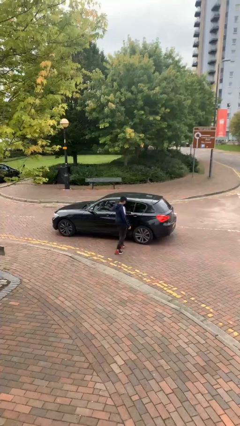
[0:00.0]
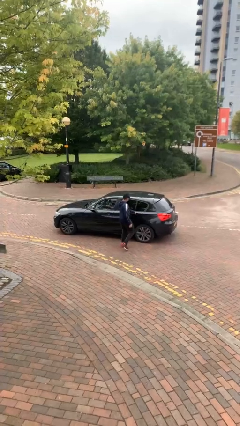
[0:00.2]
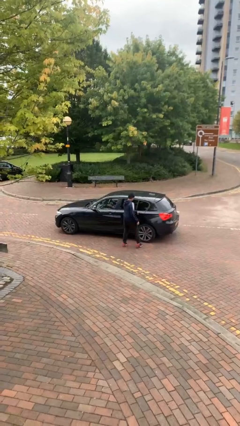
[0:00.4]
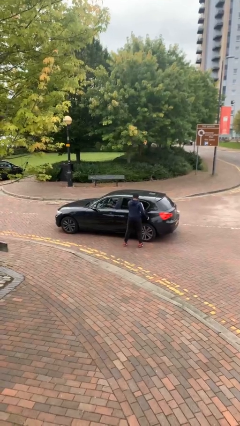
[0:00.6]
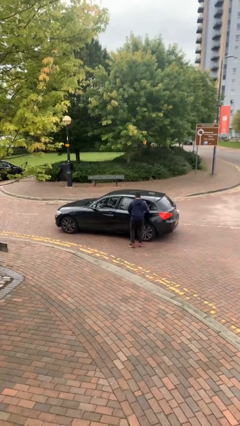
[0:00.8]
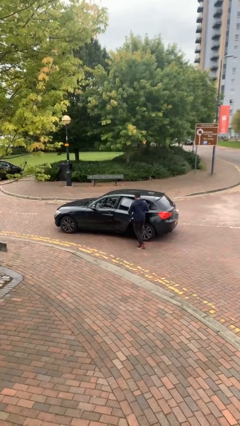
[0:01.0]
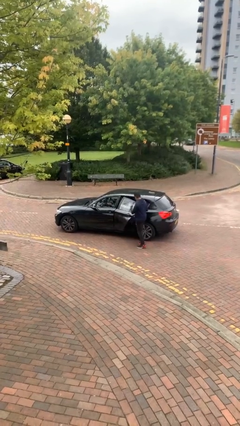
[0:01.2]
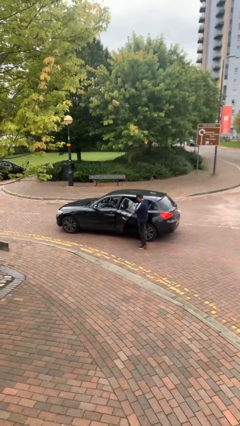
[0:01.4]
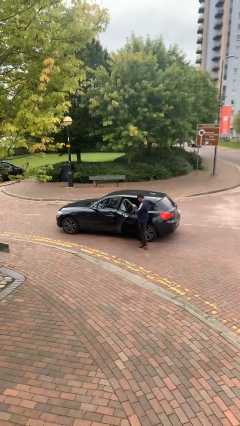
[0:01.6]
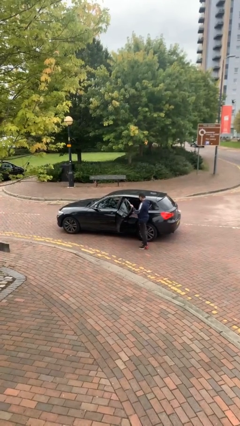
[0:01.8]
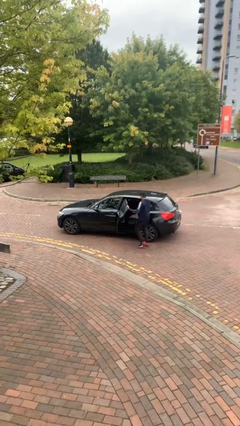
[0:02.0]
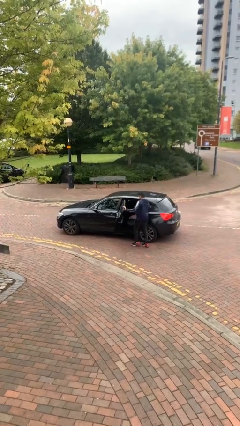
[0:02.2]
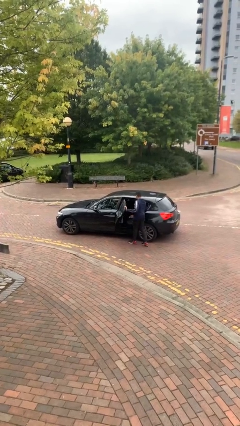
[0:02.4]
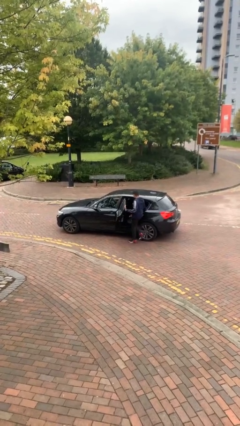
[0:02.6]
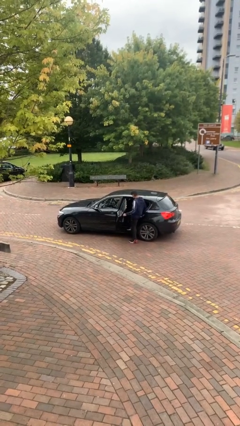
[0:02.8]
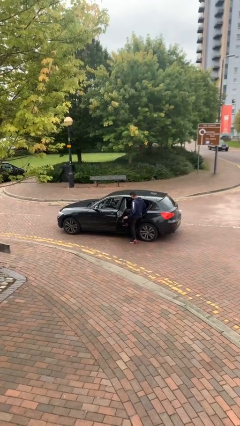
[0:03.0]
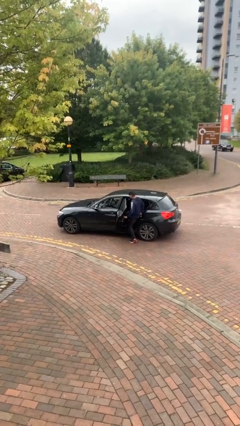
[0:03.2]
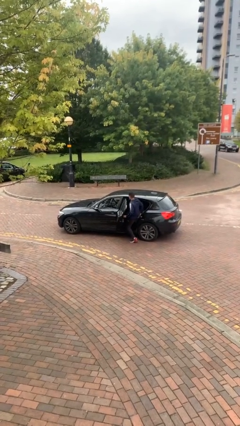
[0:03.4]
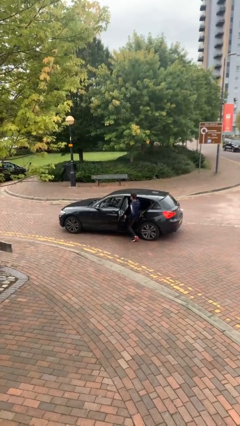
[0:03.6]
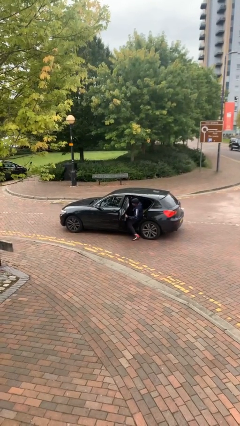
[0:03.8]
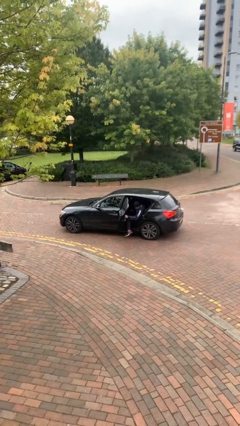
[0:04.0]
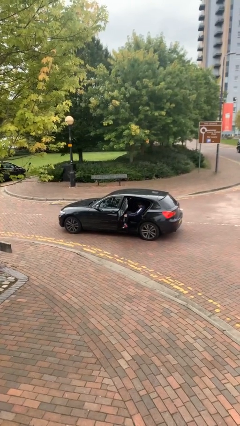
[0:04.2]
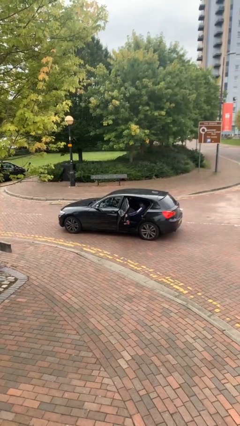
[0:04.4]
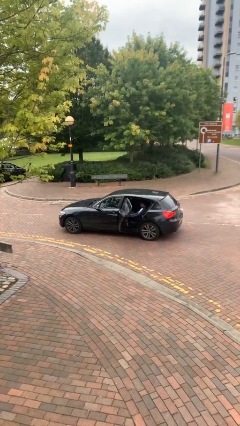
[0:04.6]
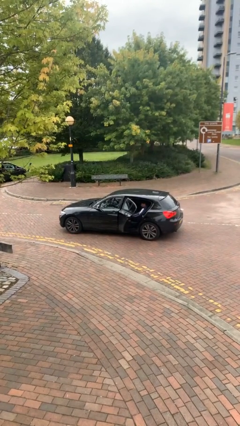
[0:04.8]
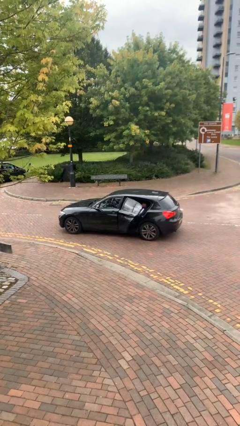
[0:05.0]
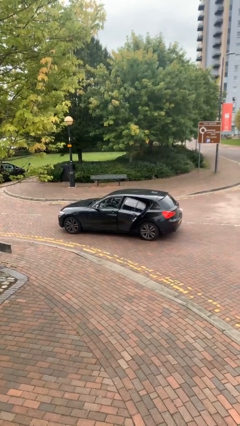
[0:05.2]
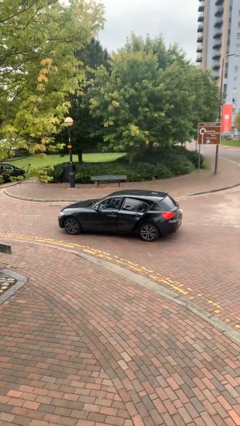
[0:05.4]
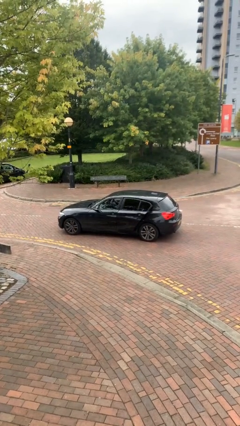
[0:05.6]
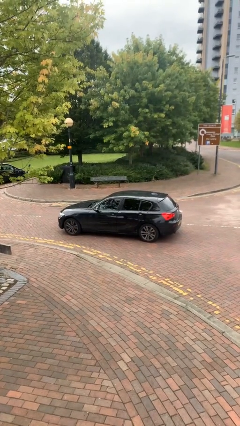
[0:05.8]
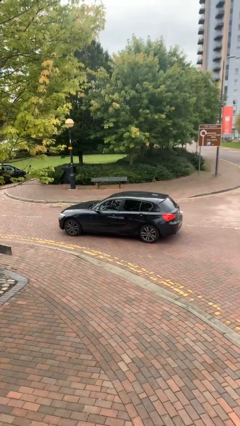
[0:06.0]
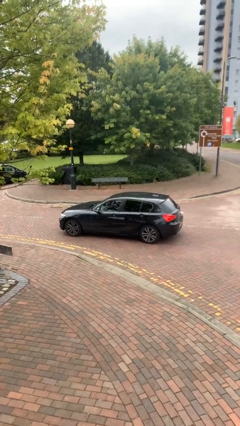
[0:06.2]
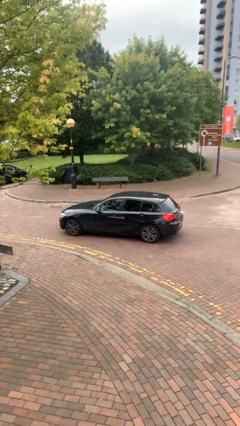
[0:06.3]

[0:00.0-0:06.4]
car picks up person

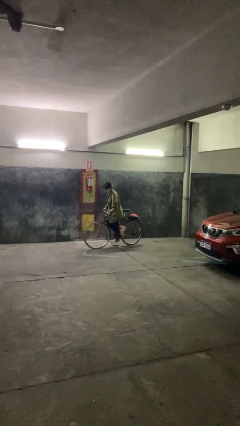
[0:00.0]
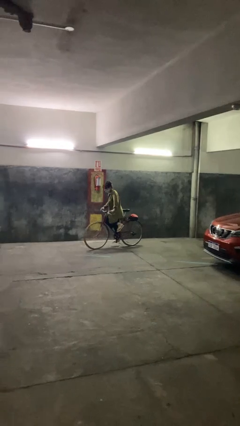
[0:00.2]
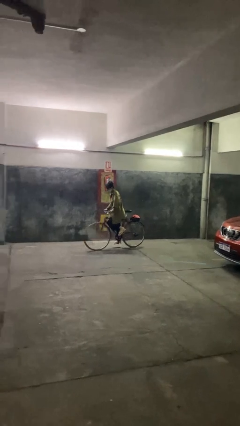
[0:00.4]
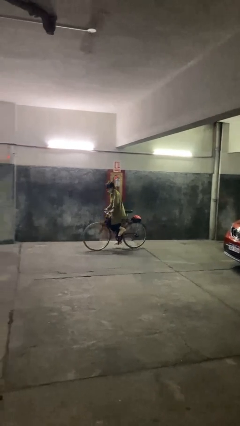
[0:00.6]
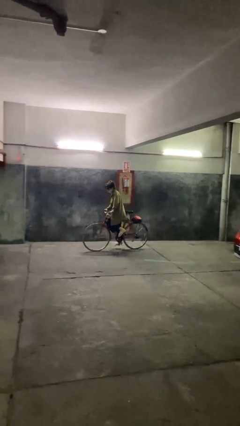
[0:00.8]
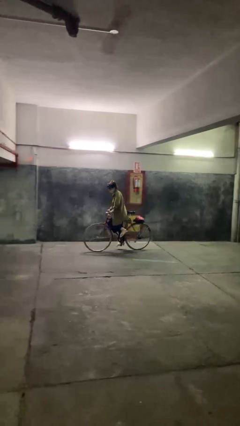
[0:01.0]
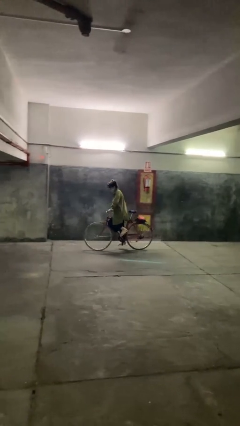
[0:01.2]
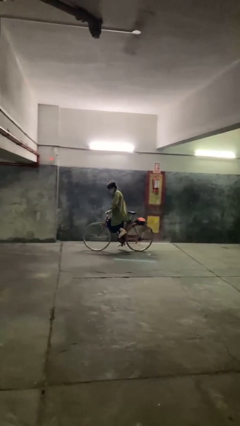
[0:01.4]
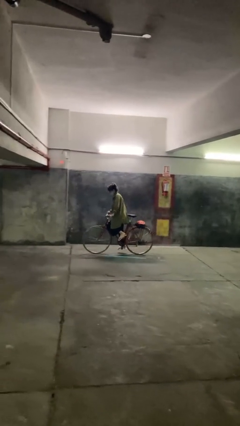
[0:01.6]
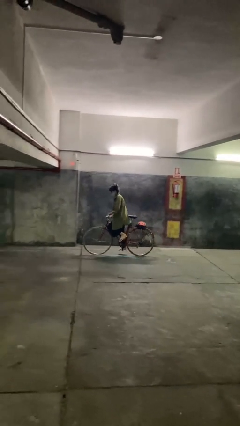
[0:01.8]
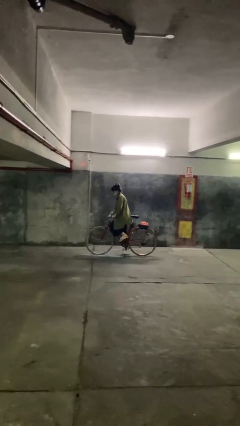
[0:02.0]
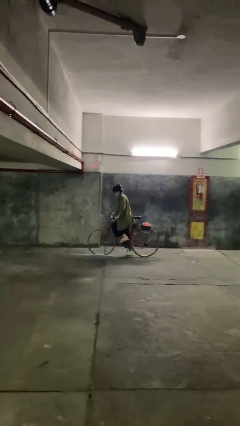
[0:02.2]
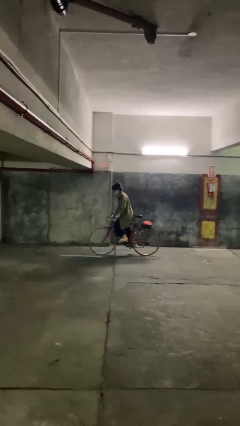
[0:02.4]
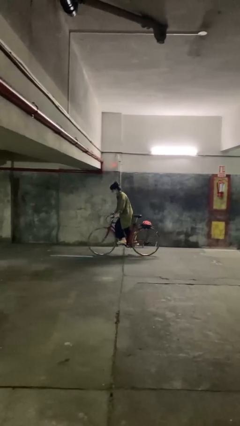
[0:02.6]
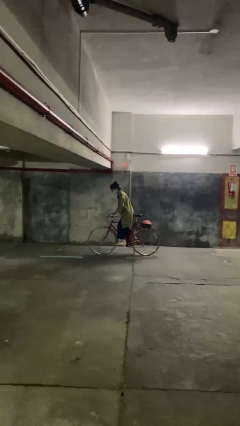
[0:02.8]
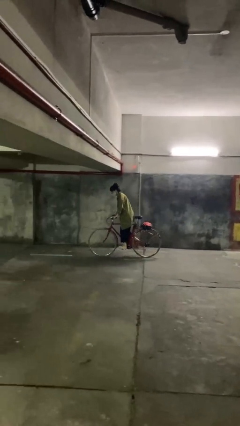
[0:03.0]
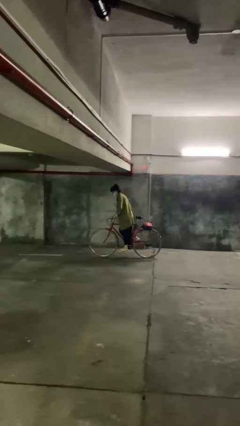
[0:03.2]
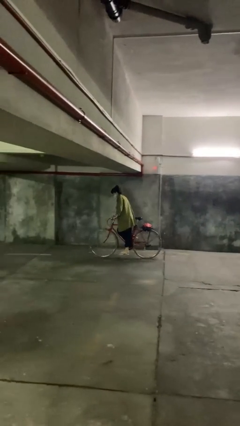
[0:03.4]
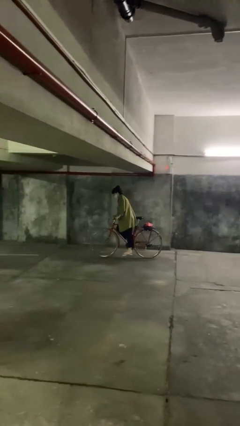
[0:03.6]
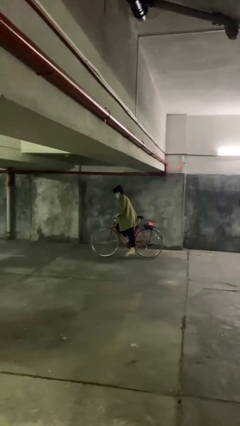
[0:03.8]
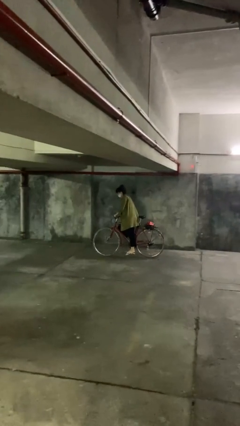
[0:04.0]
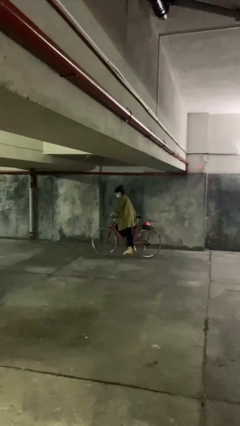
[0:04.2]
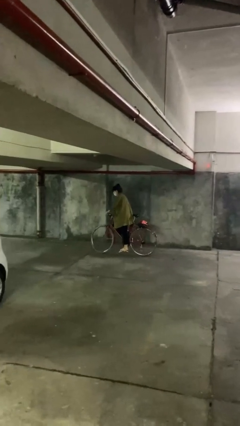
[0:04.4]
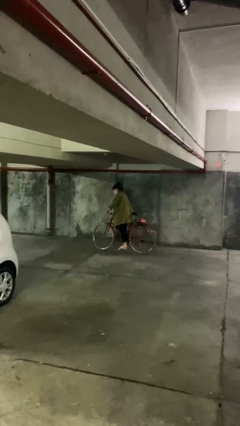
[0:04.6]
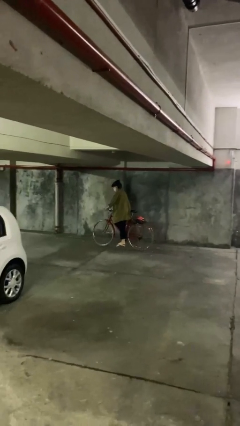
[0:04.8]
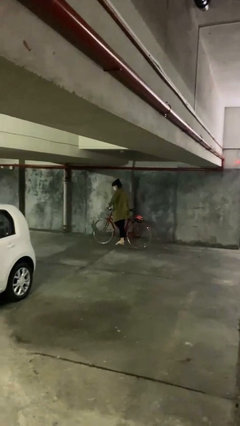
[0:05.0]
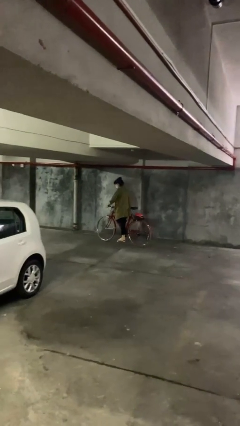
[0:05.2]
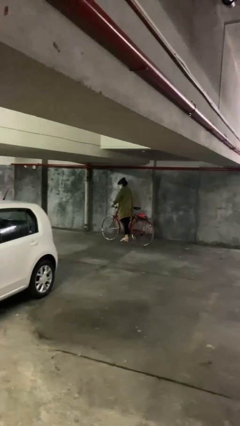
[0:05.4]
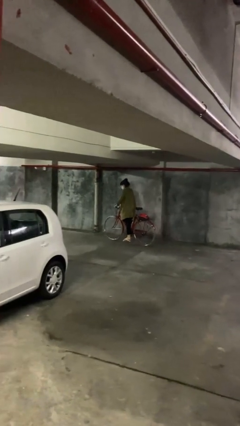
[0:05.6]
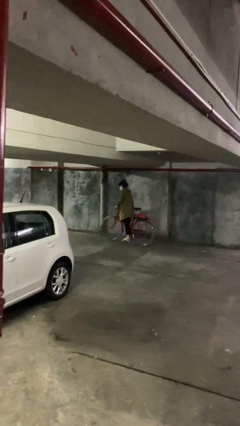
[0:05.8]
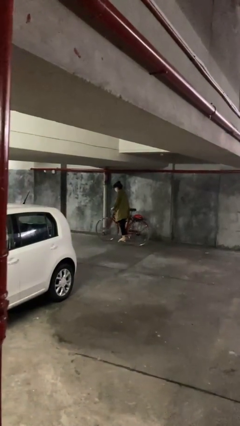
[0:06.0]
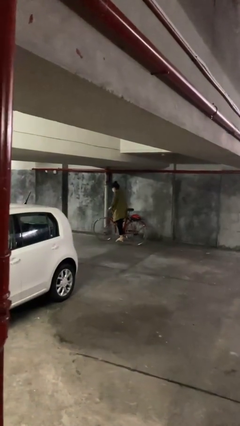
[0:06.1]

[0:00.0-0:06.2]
person rides bicycle

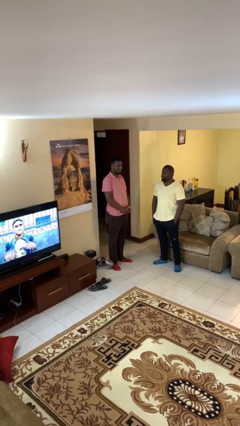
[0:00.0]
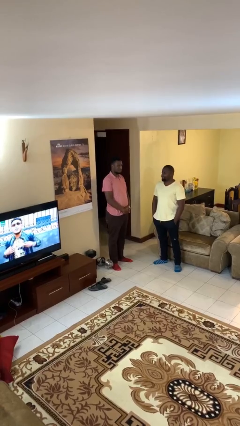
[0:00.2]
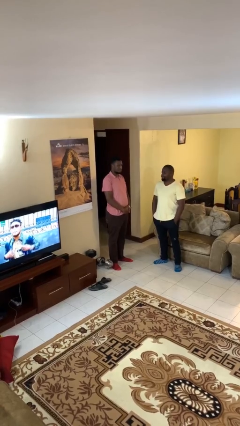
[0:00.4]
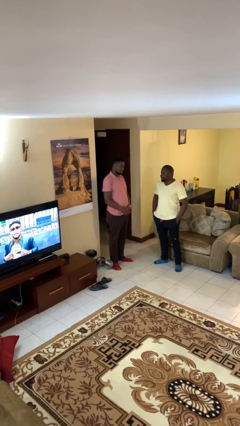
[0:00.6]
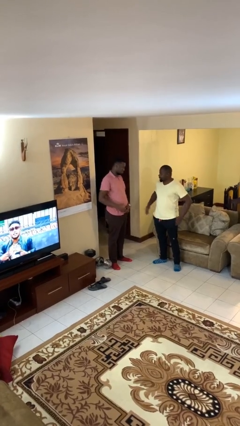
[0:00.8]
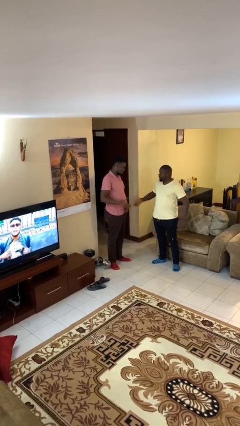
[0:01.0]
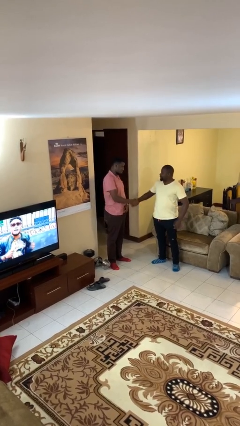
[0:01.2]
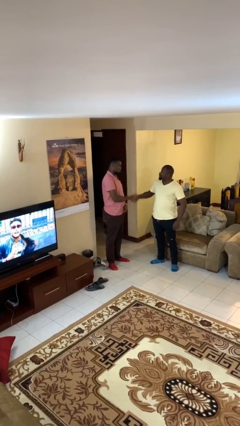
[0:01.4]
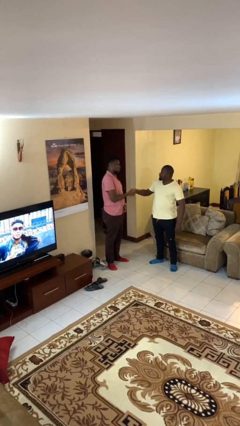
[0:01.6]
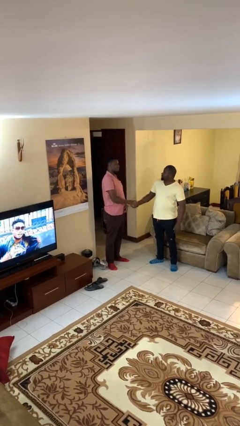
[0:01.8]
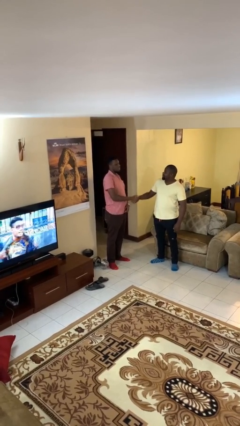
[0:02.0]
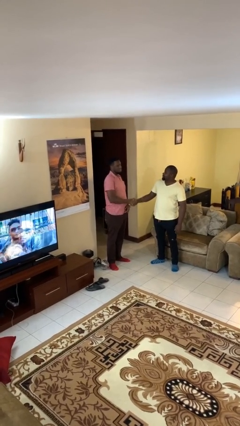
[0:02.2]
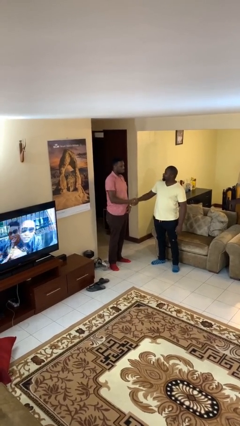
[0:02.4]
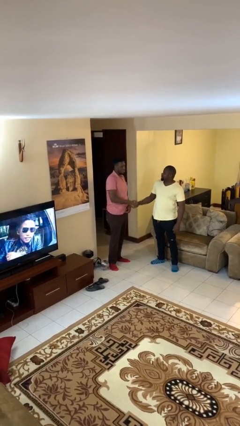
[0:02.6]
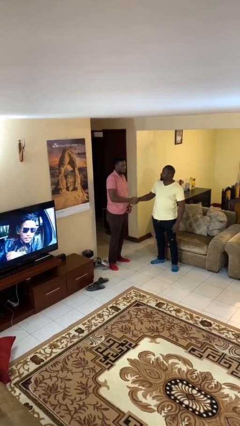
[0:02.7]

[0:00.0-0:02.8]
person shakes hand

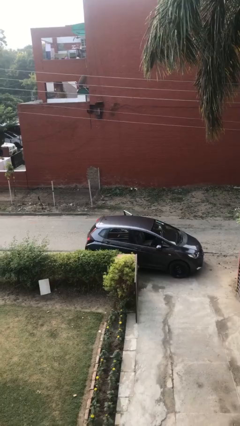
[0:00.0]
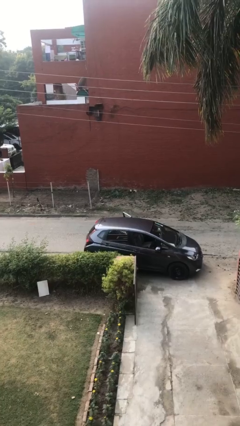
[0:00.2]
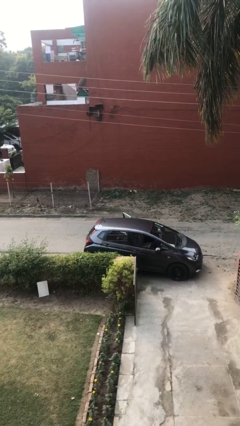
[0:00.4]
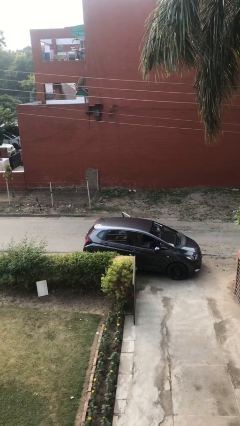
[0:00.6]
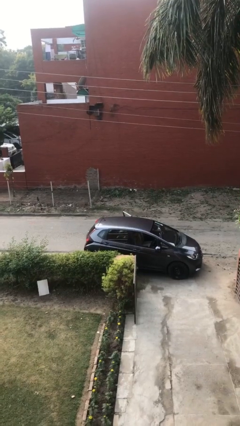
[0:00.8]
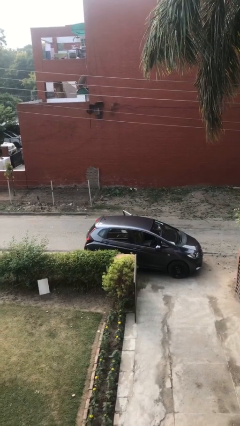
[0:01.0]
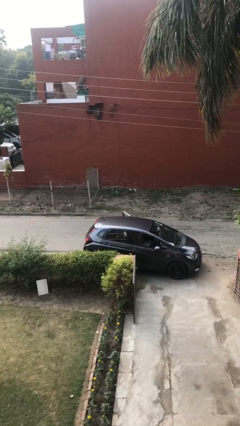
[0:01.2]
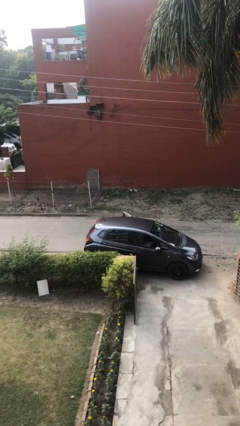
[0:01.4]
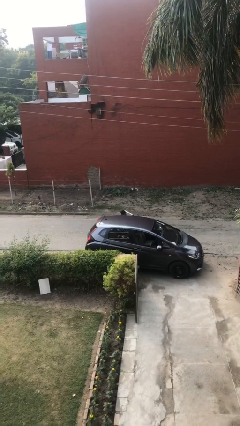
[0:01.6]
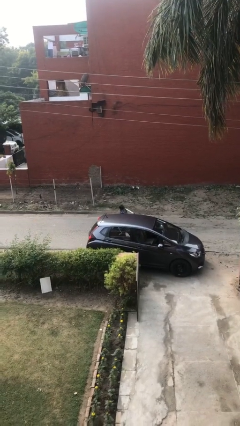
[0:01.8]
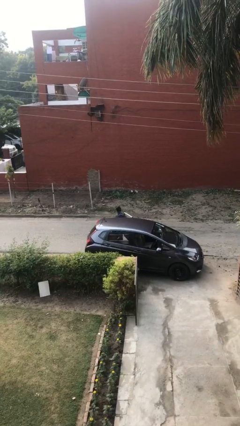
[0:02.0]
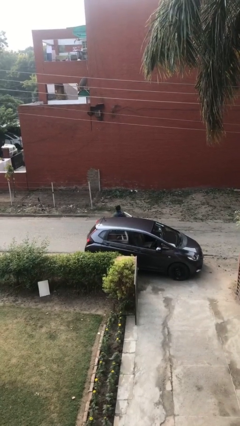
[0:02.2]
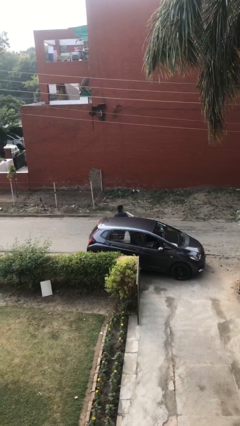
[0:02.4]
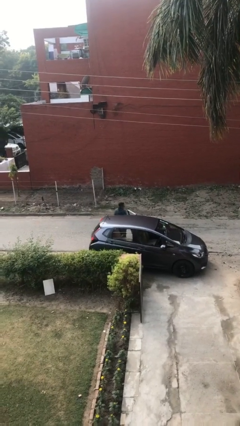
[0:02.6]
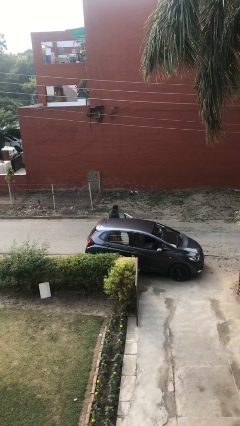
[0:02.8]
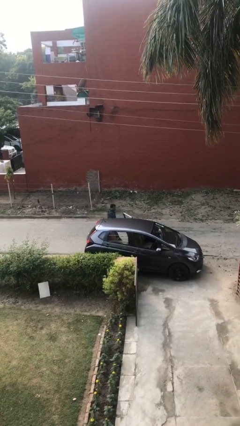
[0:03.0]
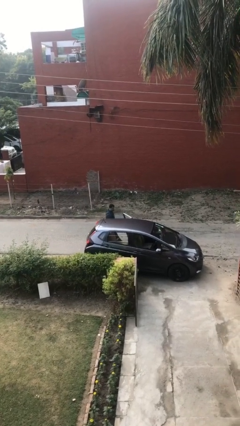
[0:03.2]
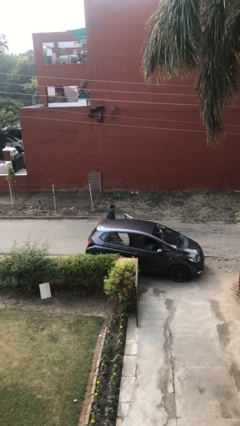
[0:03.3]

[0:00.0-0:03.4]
person exits car
